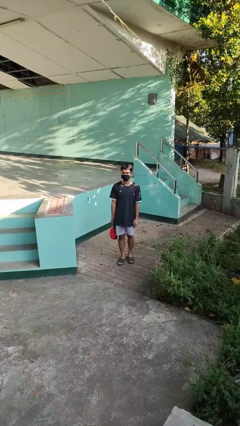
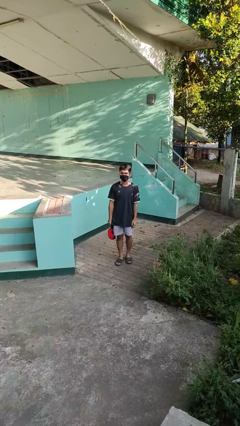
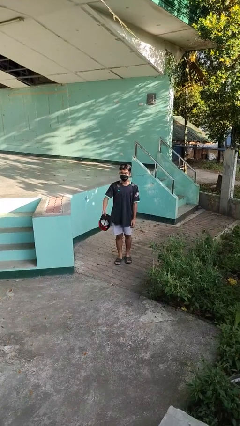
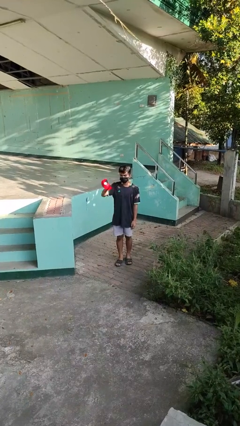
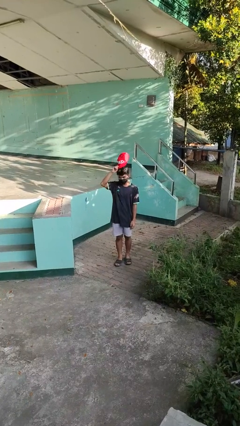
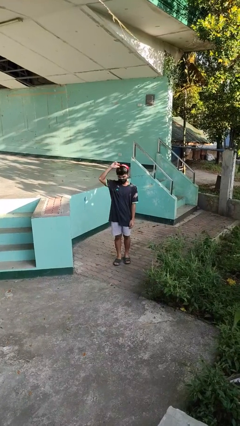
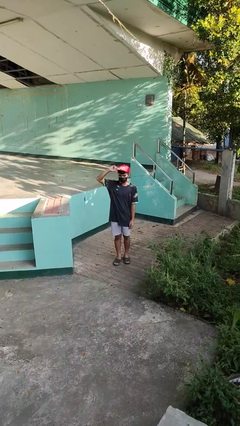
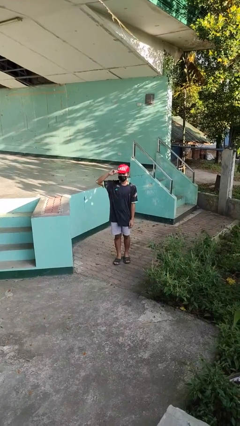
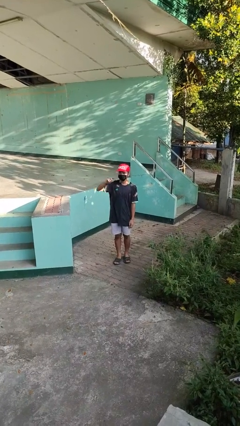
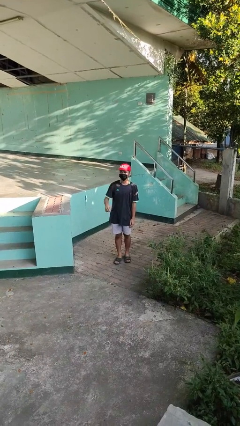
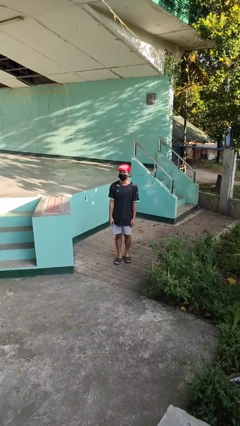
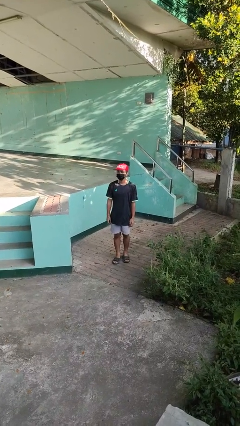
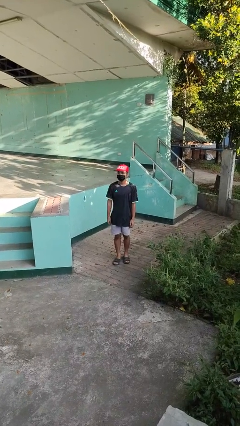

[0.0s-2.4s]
person puts on hat

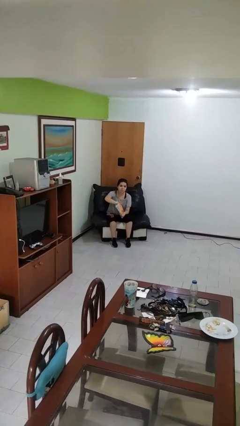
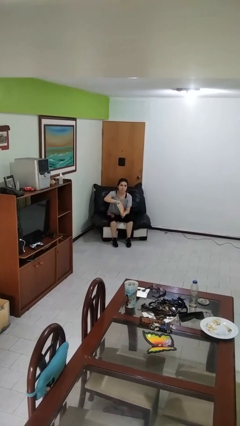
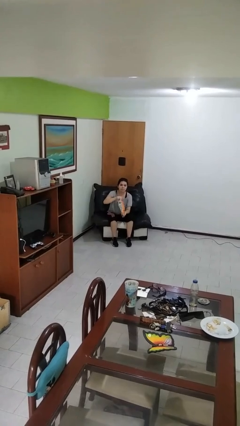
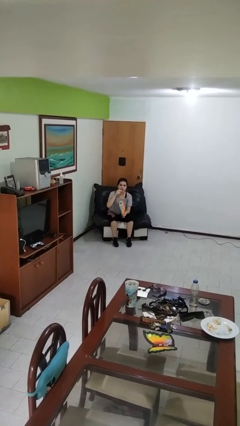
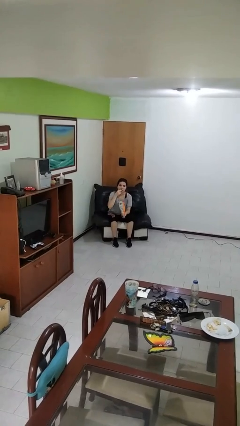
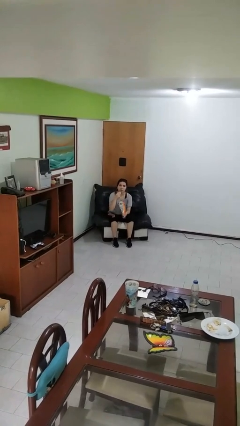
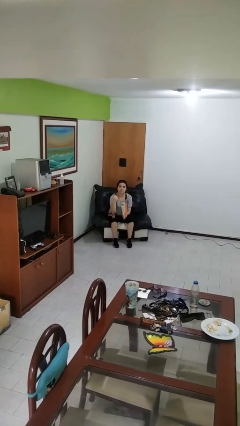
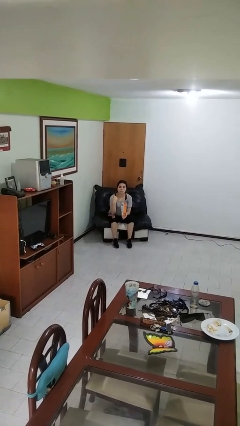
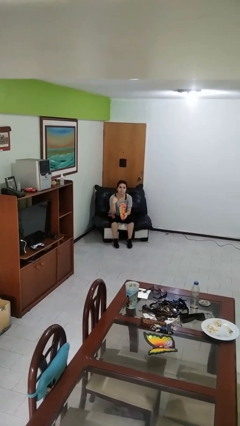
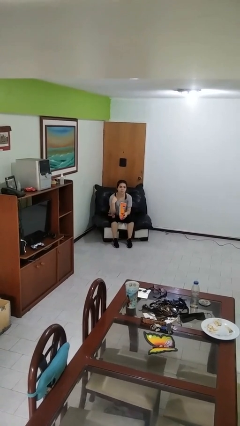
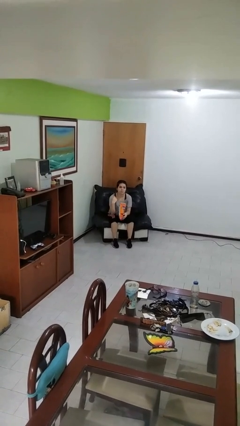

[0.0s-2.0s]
person eats snack from bag

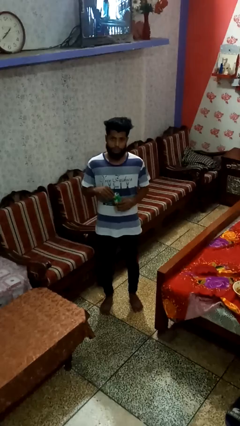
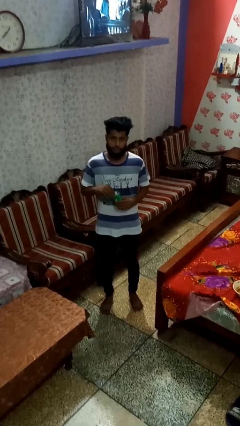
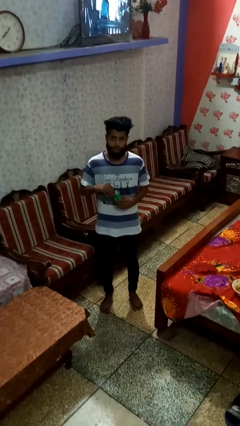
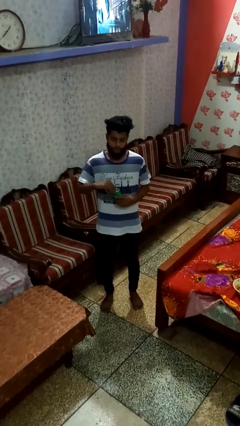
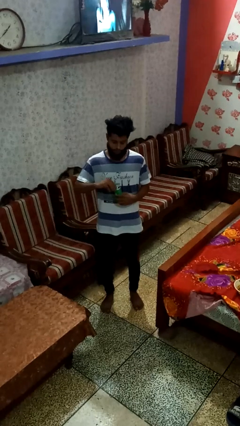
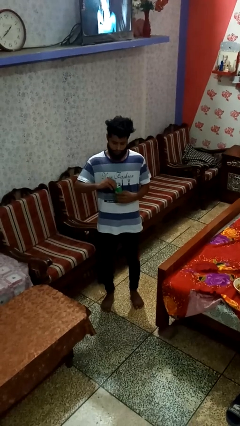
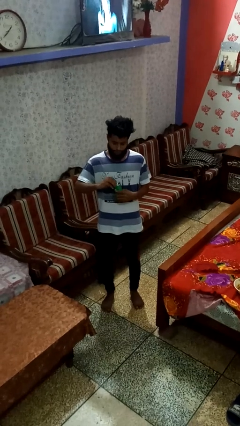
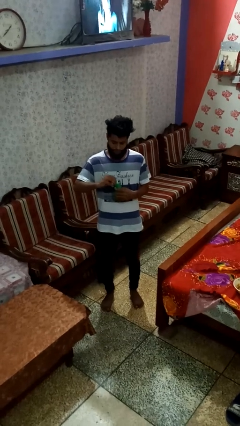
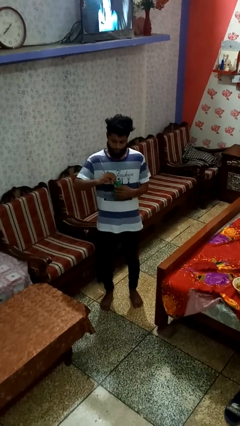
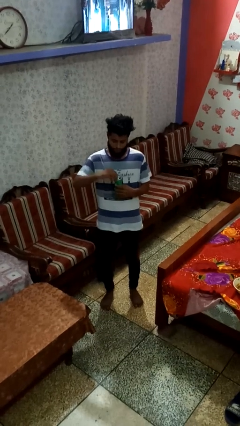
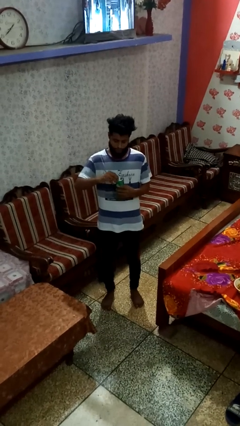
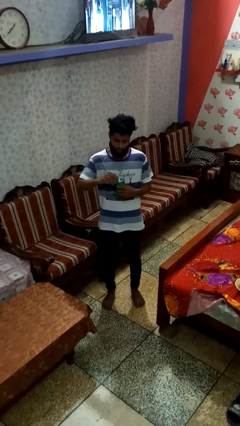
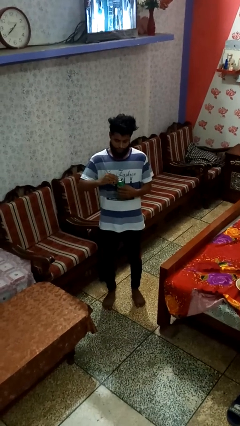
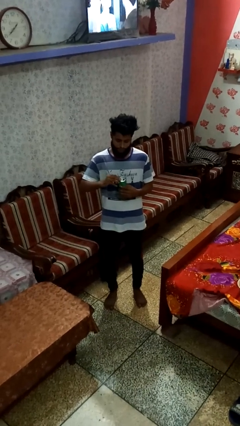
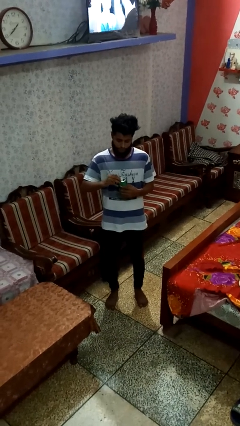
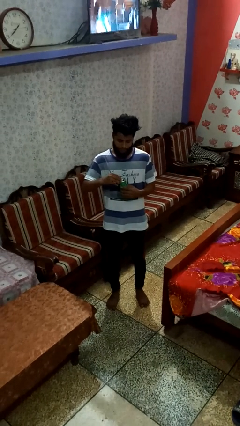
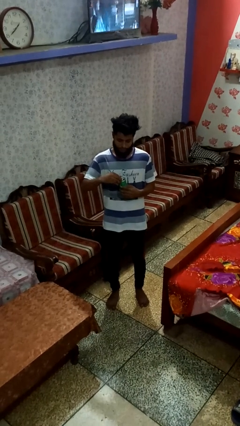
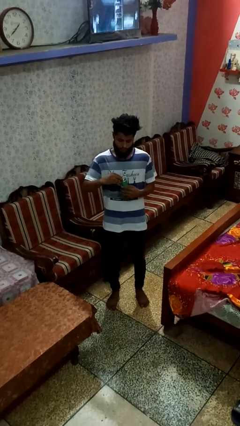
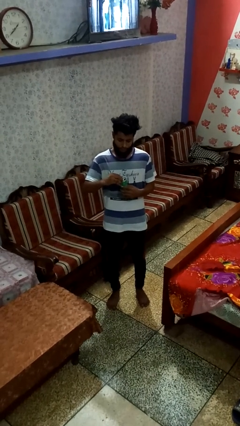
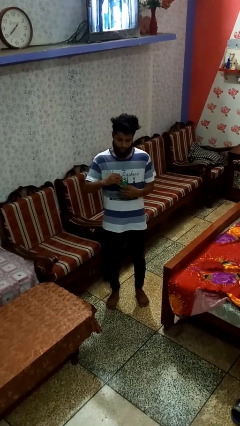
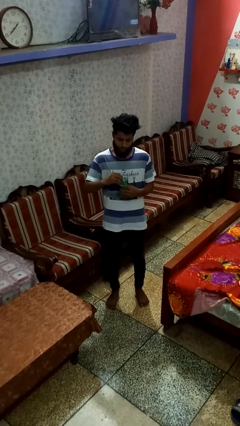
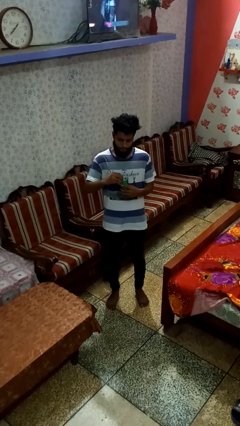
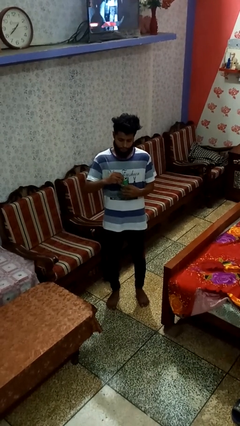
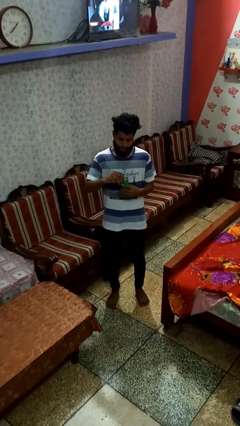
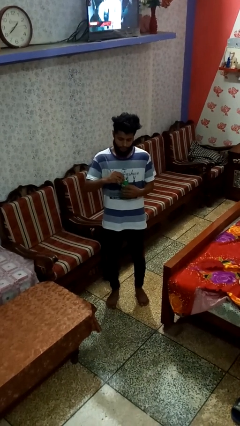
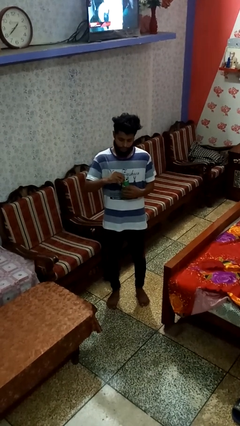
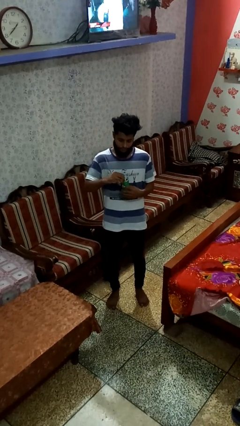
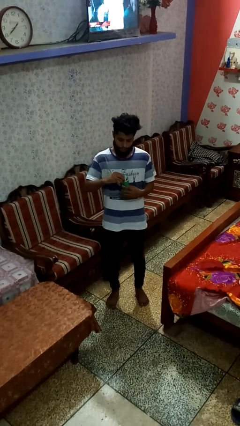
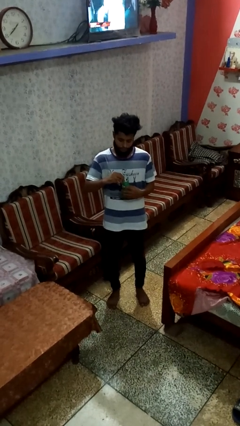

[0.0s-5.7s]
person opens beverage can

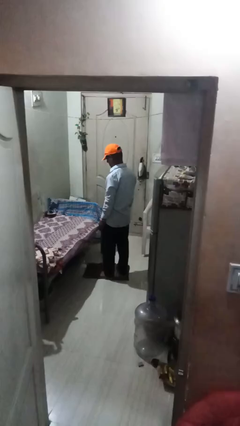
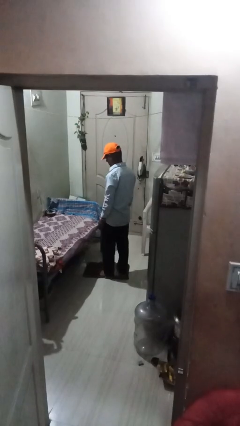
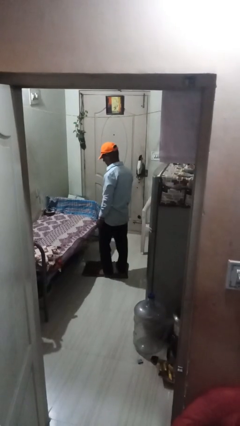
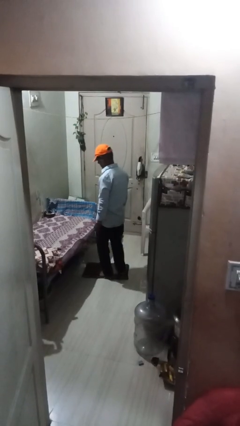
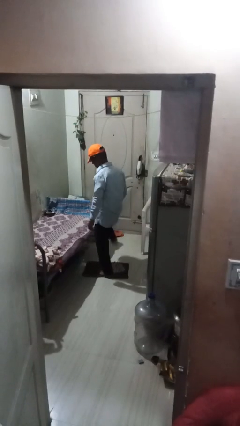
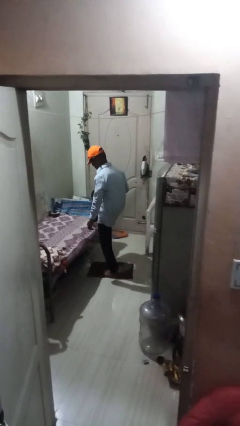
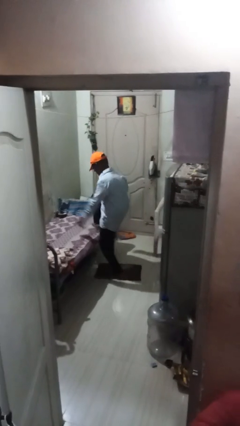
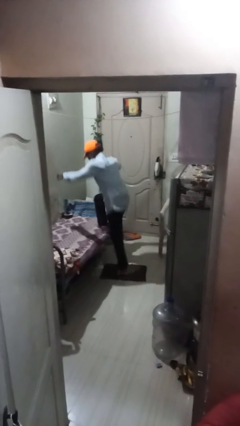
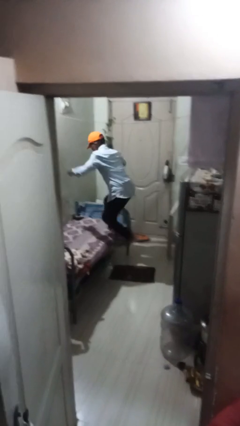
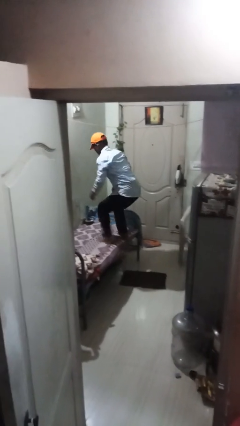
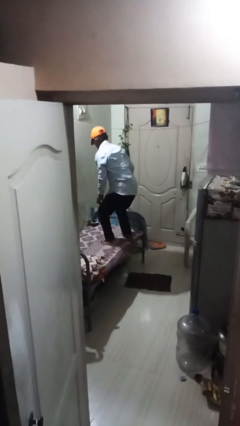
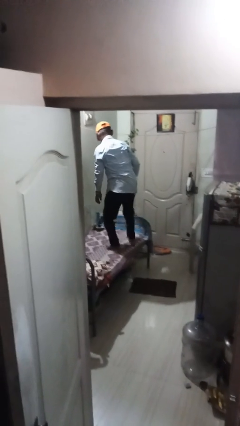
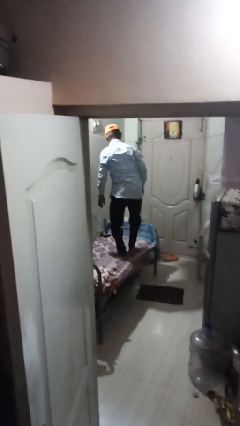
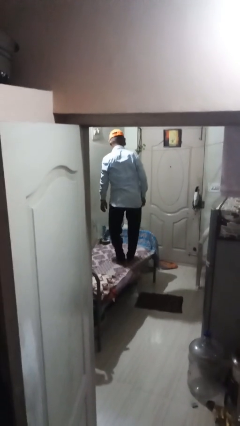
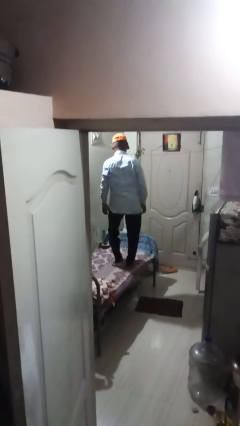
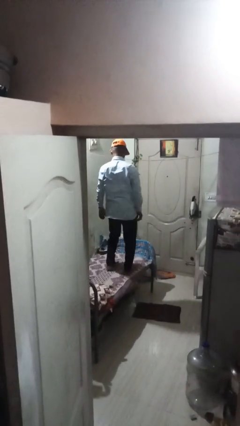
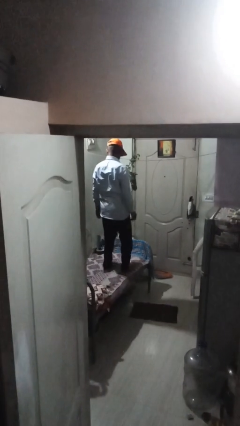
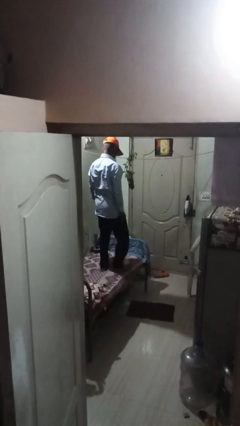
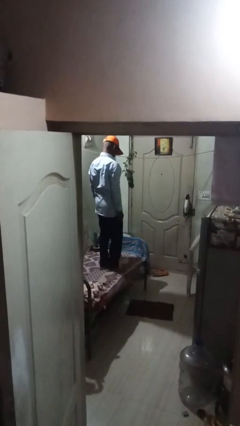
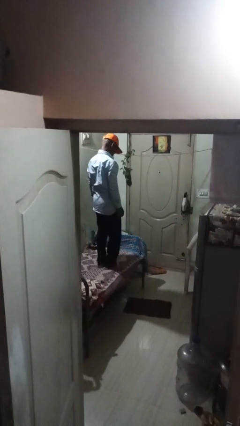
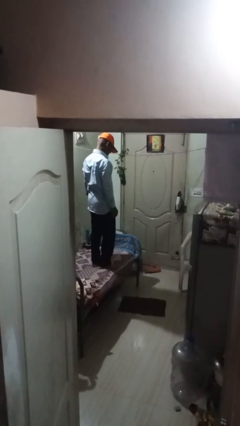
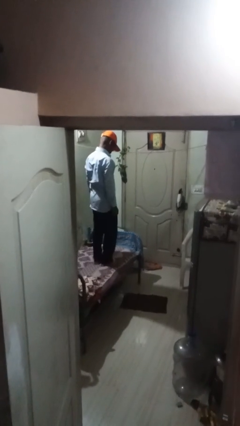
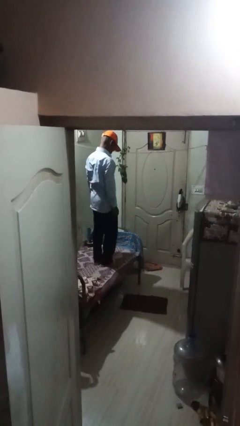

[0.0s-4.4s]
person climbs on couch

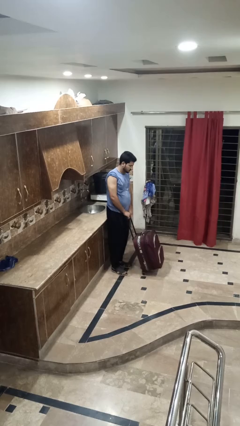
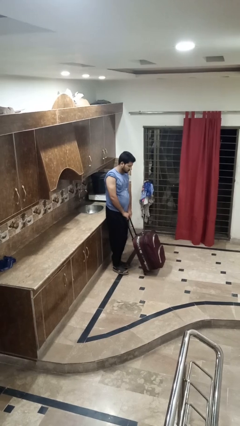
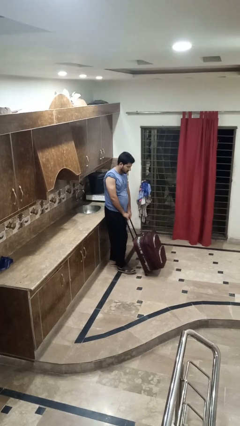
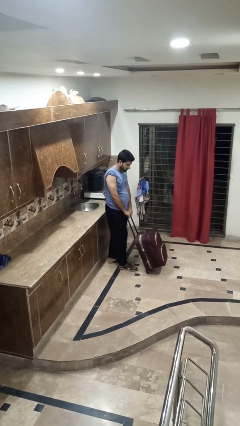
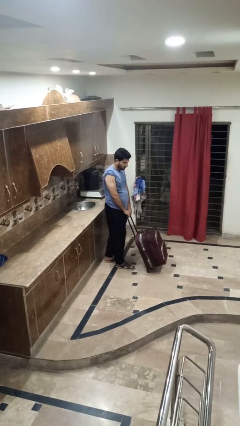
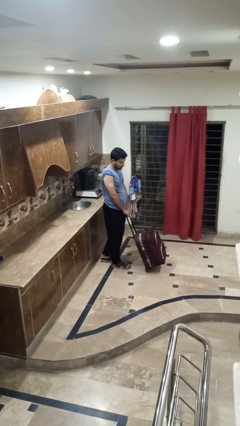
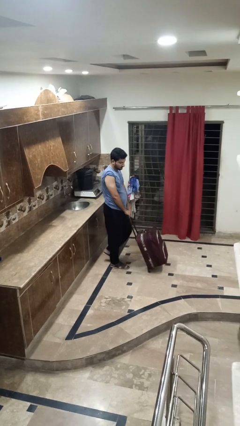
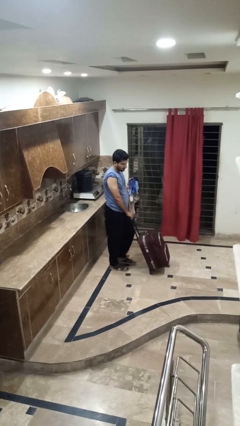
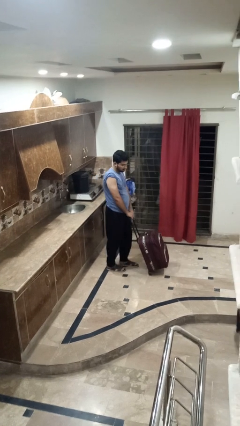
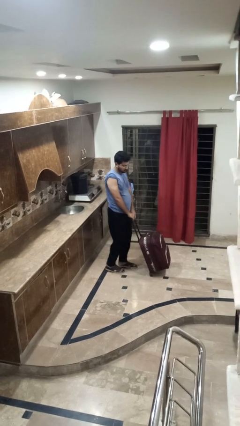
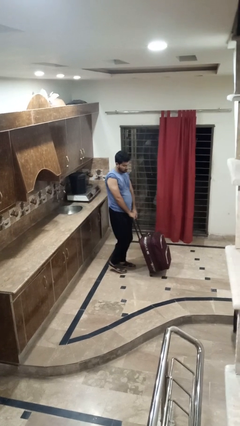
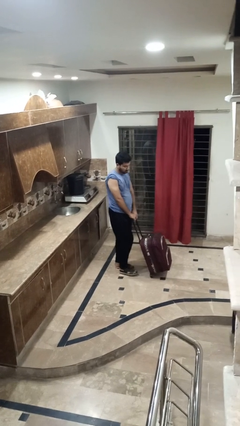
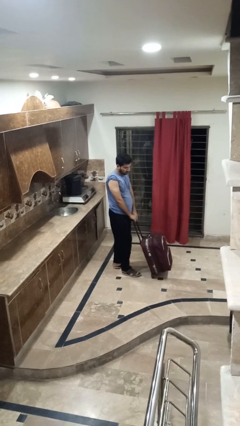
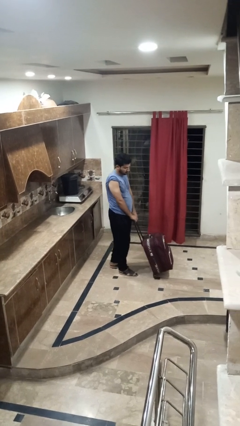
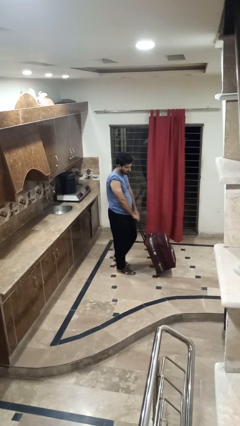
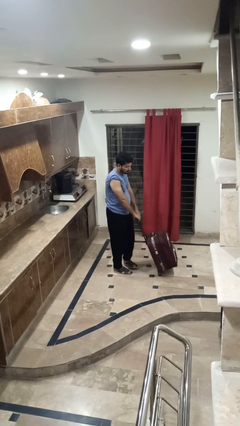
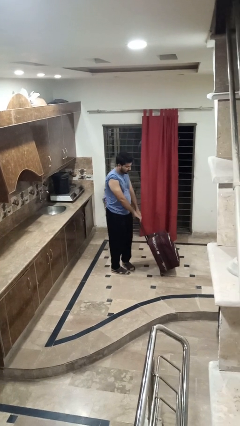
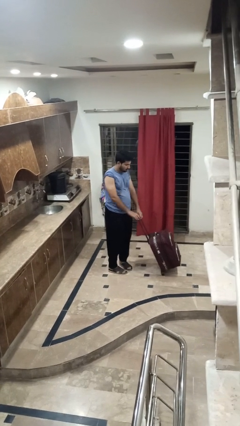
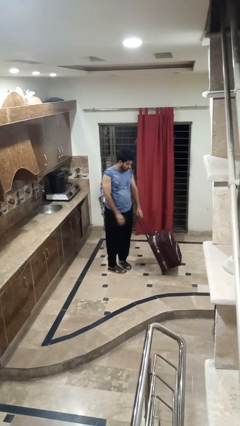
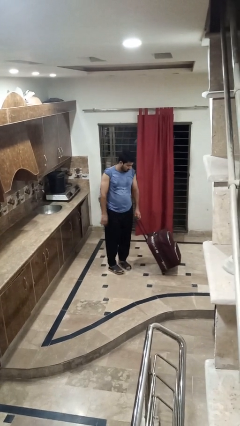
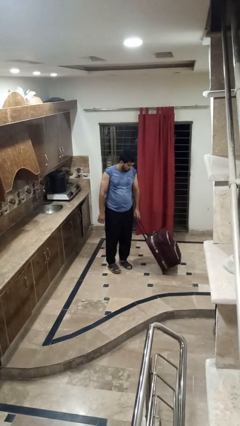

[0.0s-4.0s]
person pushes wheeled cart
